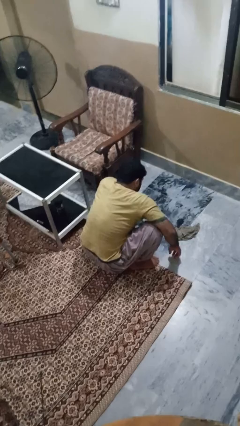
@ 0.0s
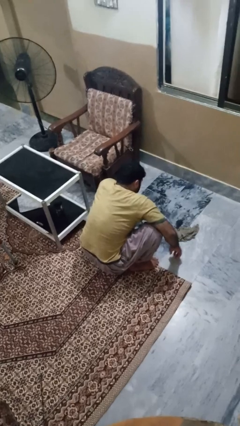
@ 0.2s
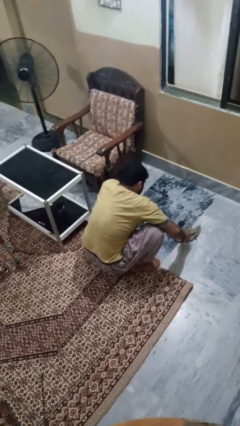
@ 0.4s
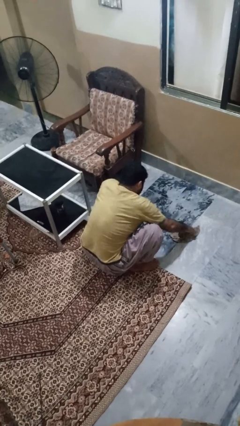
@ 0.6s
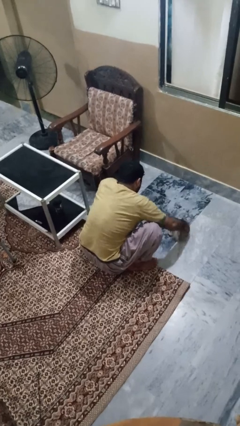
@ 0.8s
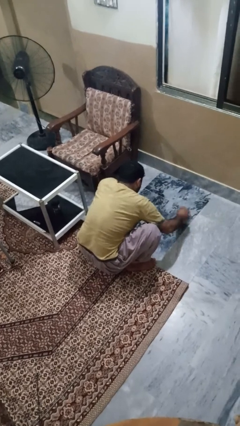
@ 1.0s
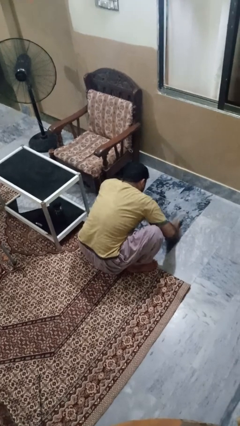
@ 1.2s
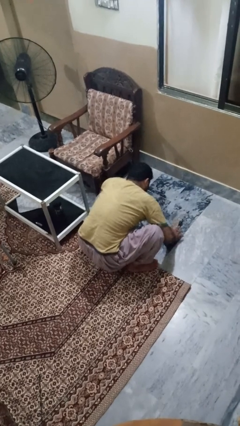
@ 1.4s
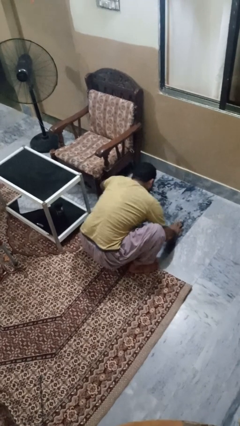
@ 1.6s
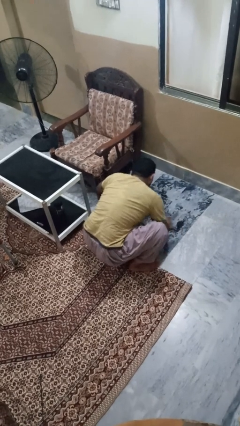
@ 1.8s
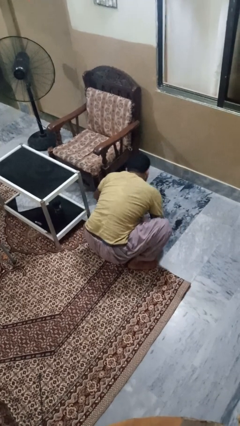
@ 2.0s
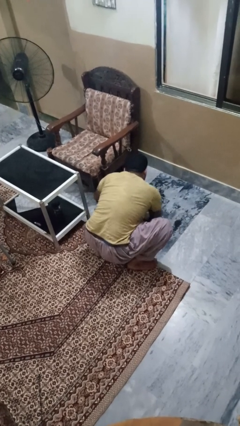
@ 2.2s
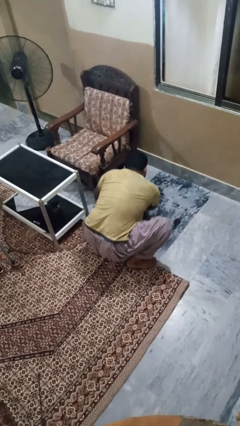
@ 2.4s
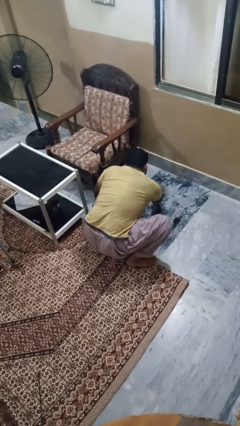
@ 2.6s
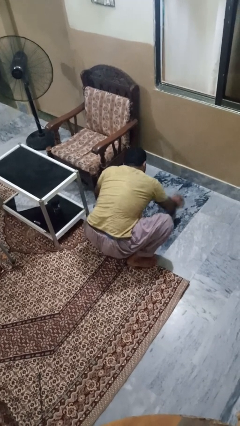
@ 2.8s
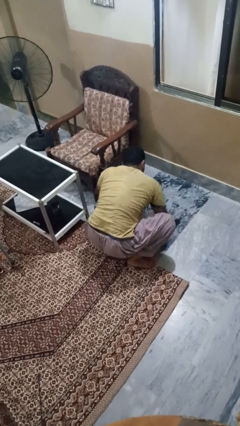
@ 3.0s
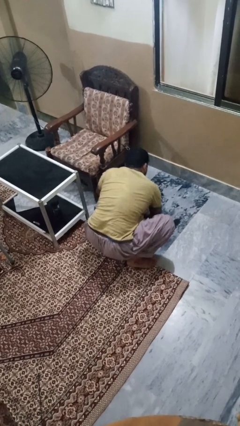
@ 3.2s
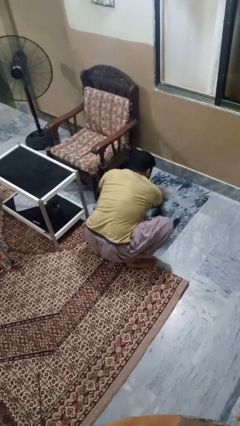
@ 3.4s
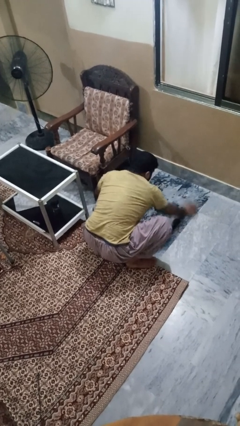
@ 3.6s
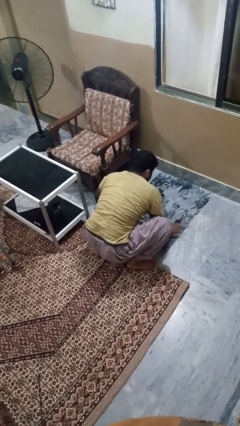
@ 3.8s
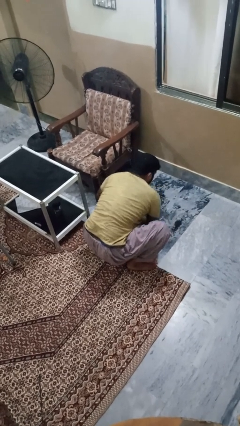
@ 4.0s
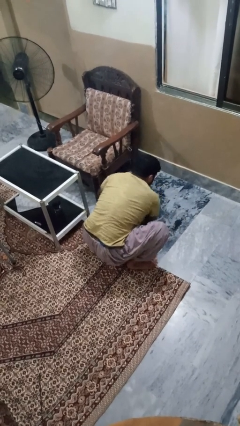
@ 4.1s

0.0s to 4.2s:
person mops

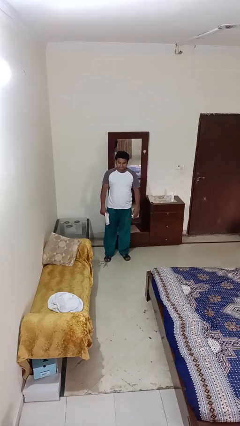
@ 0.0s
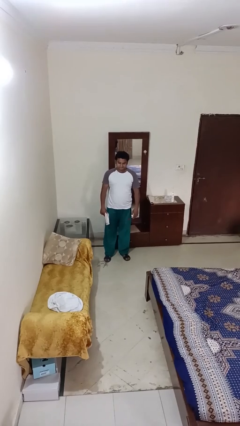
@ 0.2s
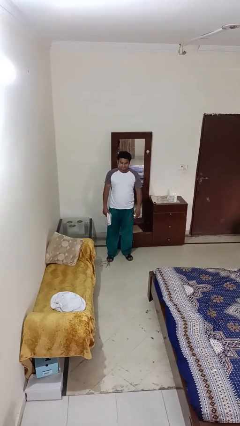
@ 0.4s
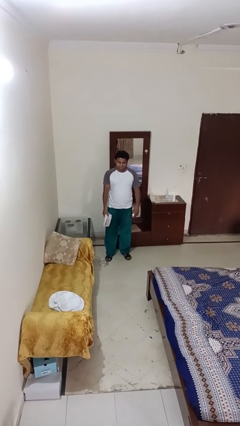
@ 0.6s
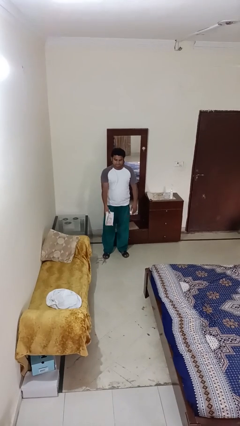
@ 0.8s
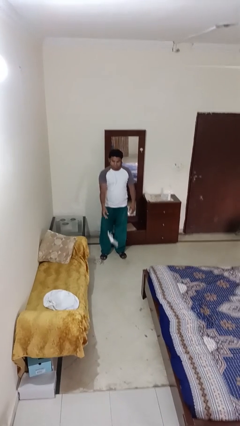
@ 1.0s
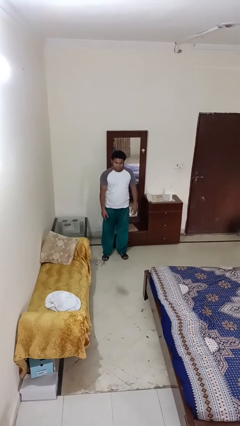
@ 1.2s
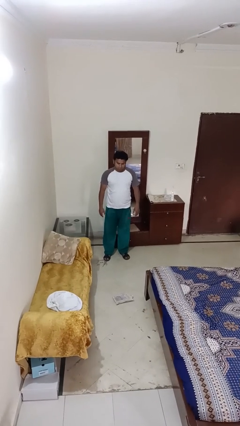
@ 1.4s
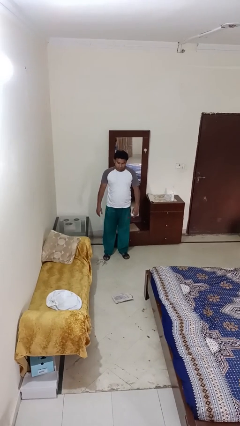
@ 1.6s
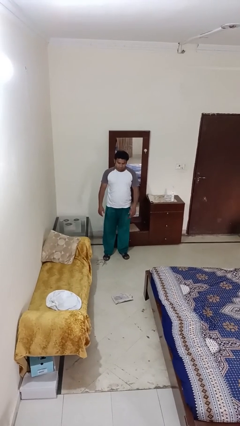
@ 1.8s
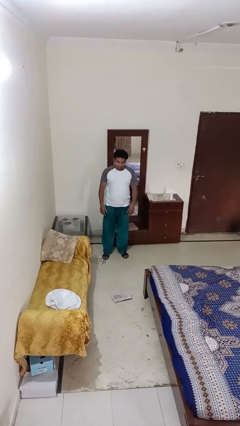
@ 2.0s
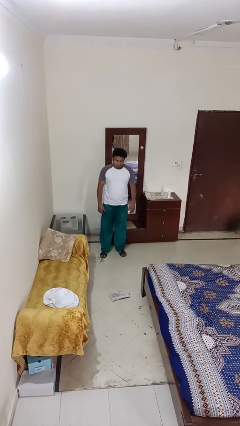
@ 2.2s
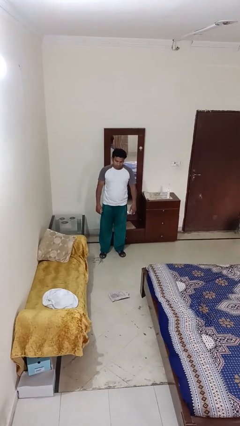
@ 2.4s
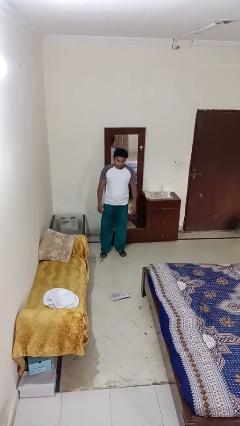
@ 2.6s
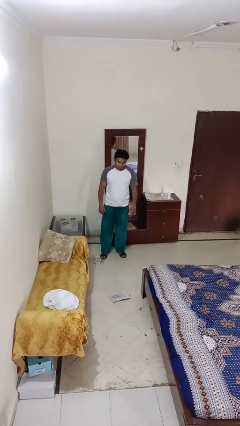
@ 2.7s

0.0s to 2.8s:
person throws object to ground

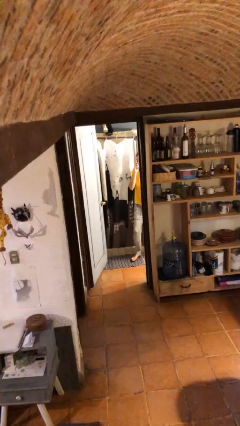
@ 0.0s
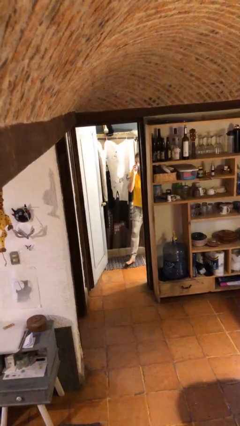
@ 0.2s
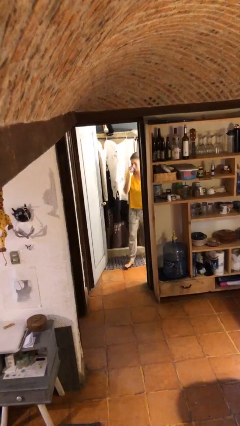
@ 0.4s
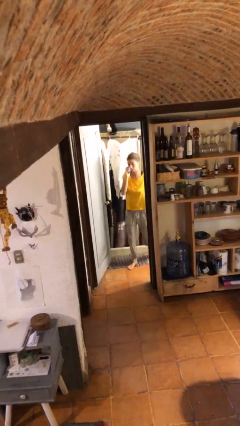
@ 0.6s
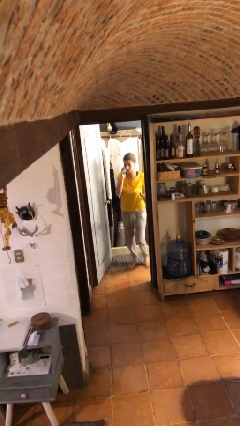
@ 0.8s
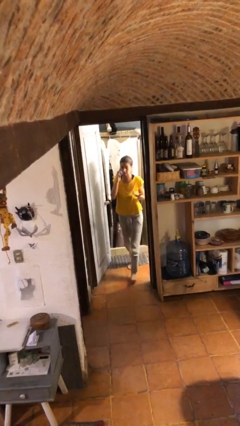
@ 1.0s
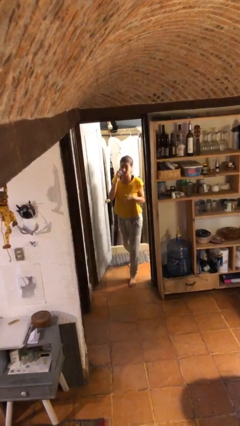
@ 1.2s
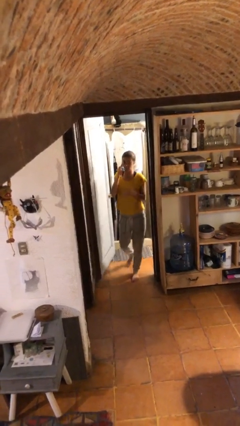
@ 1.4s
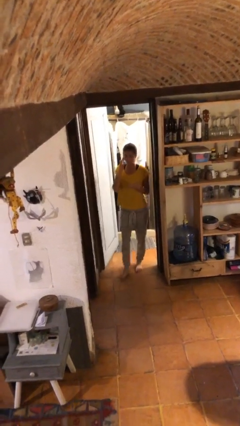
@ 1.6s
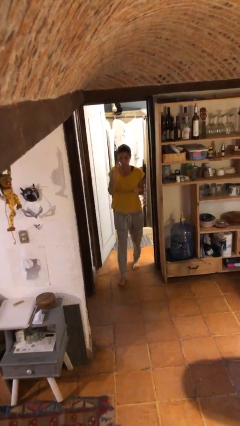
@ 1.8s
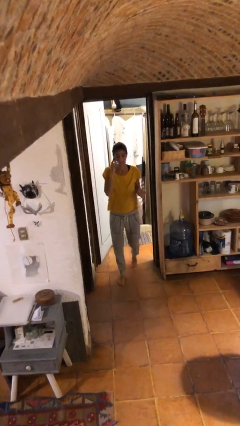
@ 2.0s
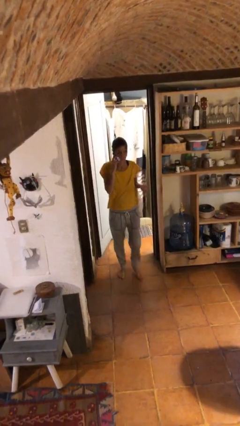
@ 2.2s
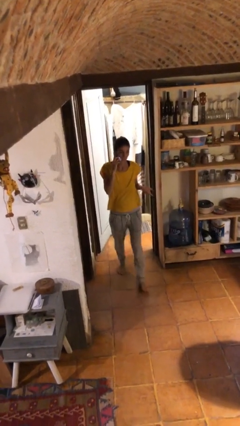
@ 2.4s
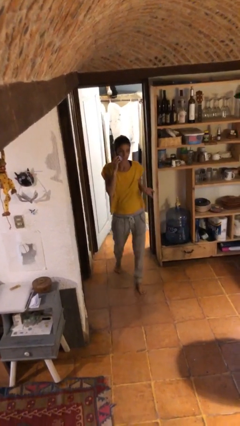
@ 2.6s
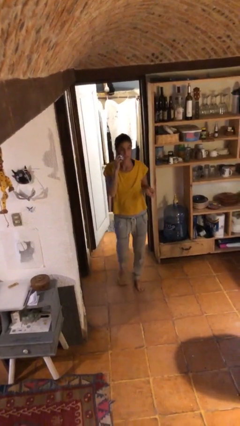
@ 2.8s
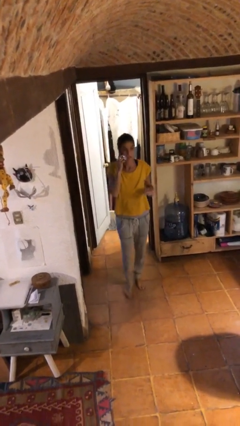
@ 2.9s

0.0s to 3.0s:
person enters scene through structure

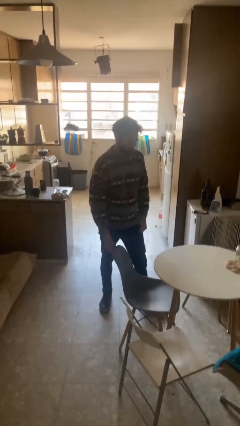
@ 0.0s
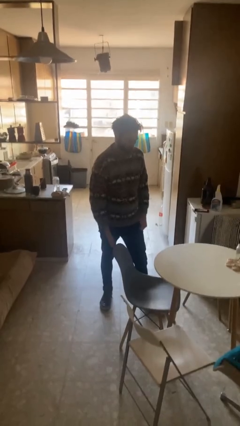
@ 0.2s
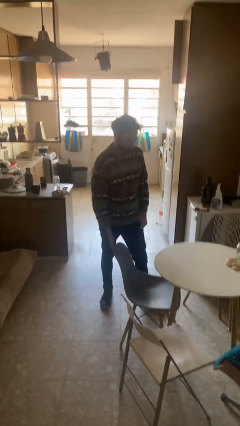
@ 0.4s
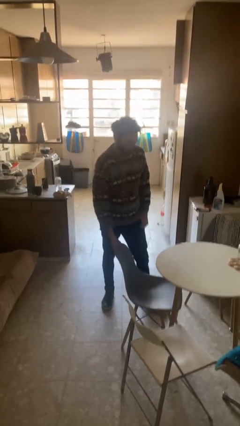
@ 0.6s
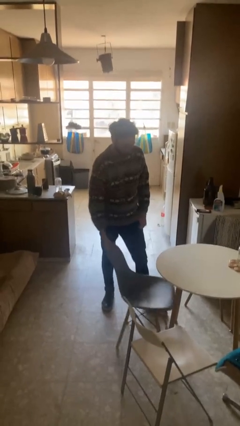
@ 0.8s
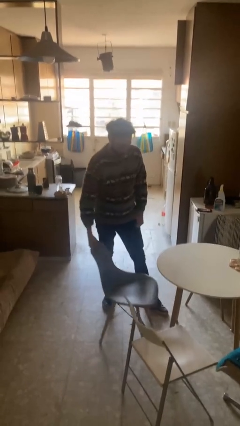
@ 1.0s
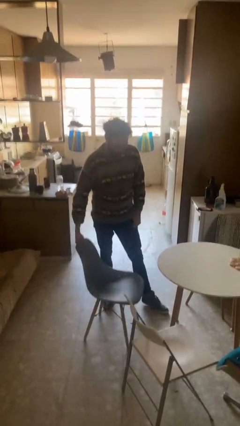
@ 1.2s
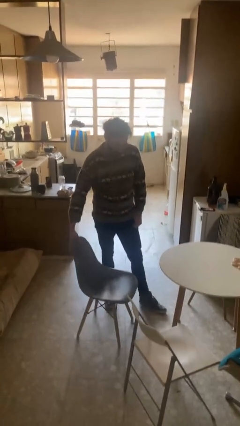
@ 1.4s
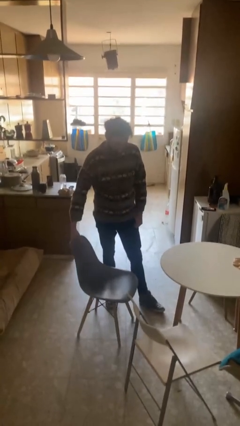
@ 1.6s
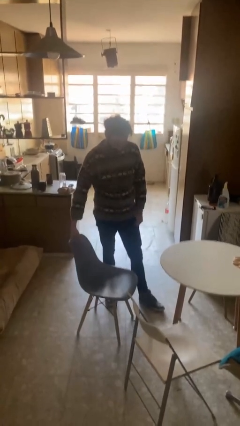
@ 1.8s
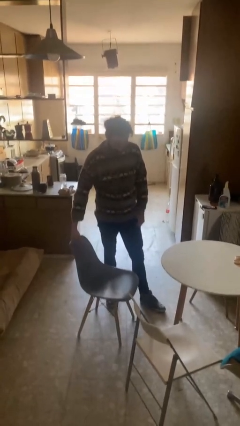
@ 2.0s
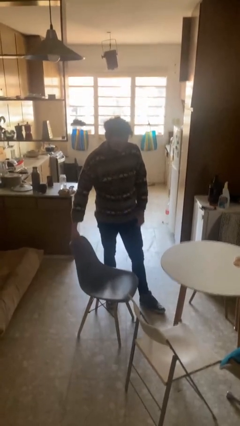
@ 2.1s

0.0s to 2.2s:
person pulls out chair

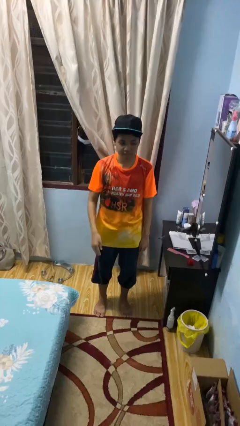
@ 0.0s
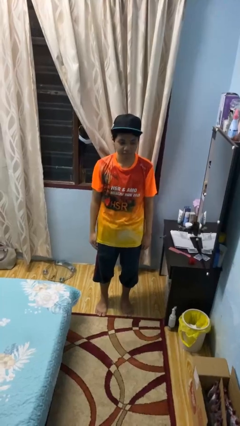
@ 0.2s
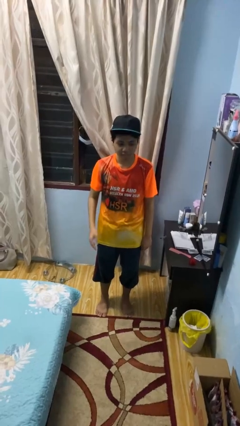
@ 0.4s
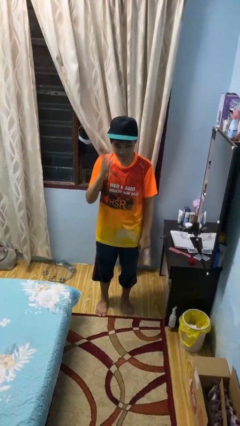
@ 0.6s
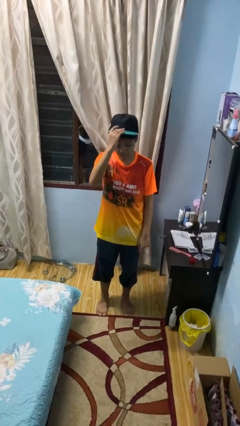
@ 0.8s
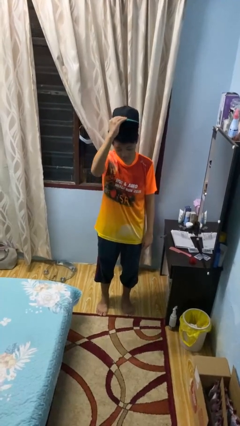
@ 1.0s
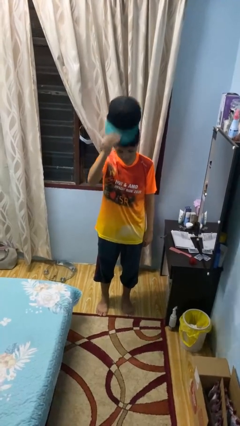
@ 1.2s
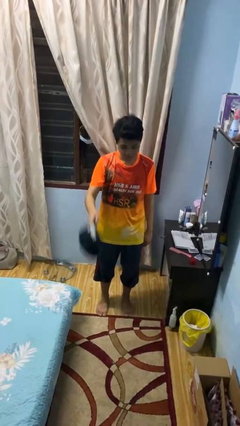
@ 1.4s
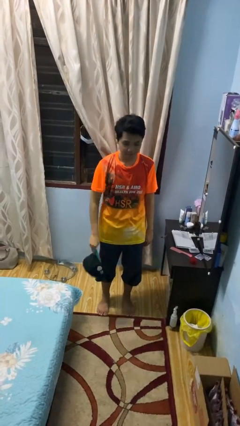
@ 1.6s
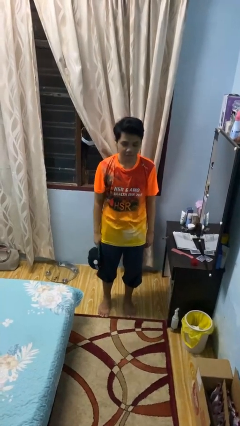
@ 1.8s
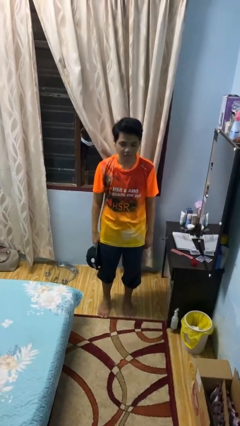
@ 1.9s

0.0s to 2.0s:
person takes off hat

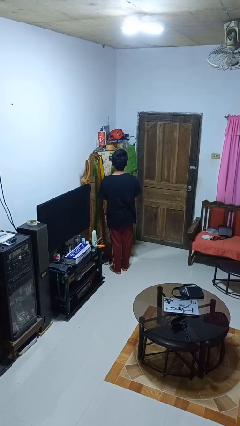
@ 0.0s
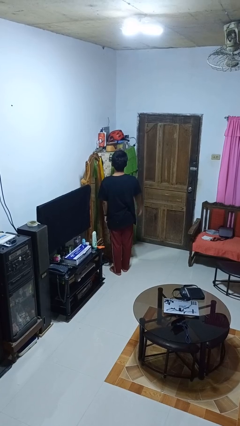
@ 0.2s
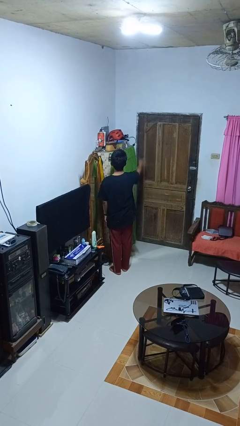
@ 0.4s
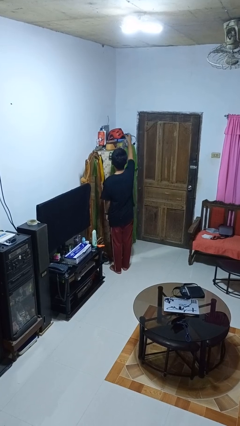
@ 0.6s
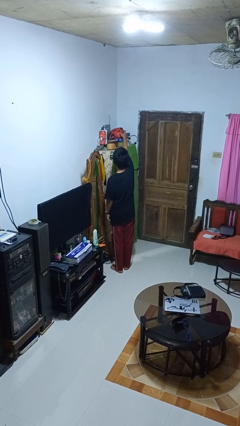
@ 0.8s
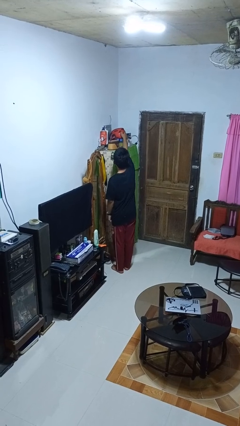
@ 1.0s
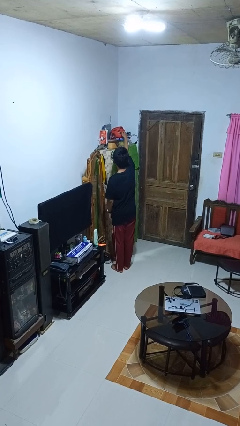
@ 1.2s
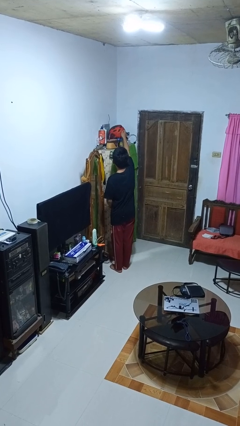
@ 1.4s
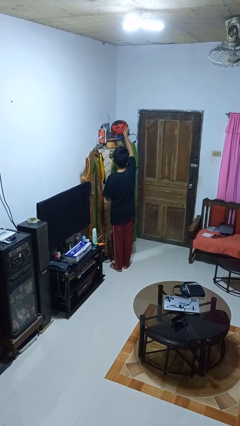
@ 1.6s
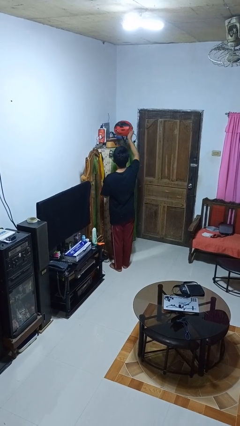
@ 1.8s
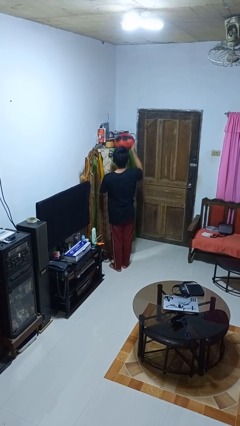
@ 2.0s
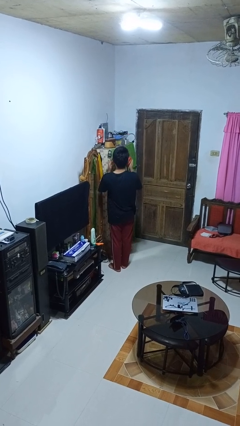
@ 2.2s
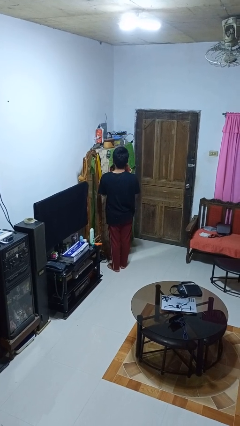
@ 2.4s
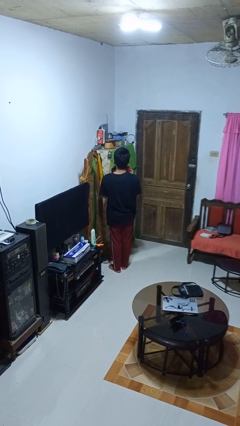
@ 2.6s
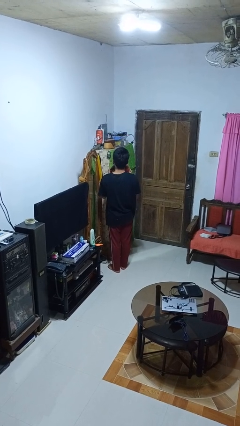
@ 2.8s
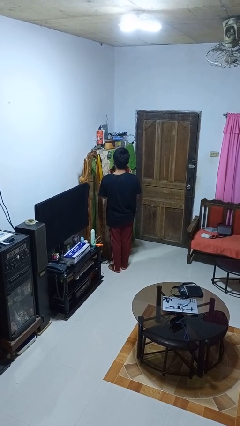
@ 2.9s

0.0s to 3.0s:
person picks up object from shelf

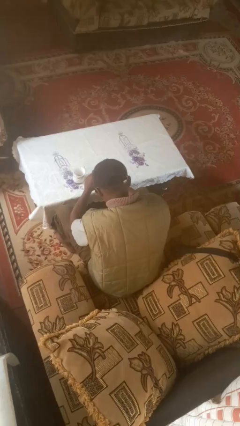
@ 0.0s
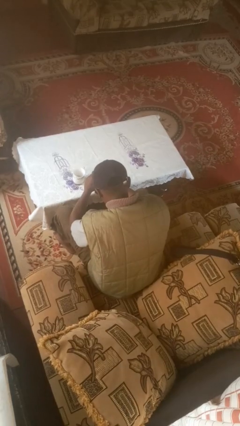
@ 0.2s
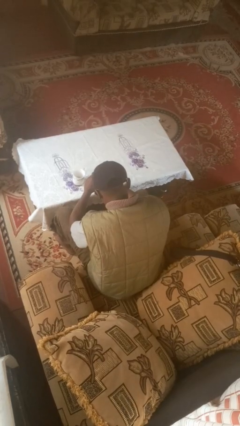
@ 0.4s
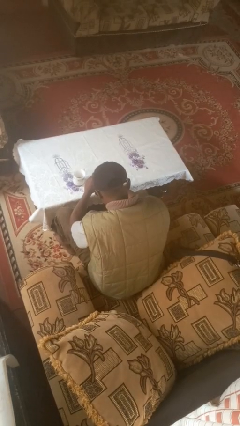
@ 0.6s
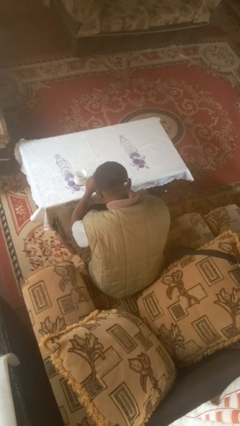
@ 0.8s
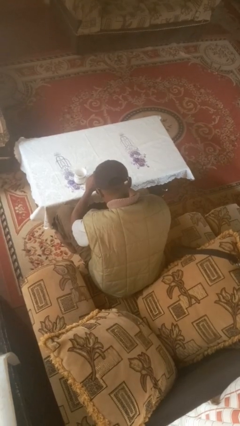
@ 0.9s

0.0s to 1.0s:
person unscrews lid from bottle
